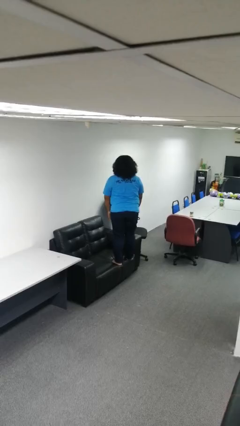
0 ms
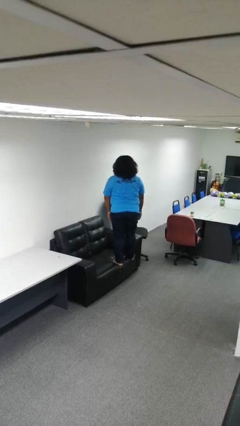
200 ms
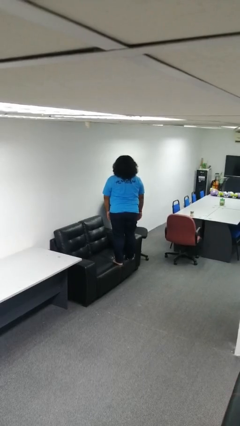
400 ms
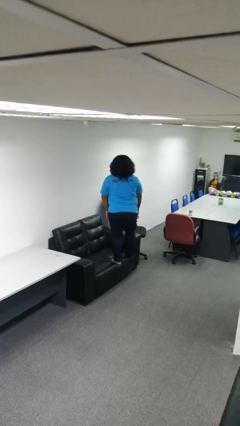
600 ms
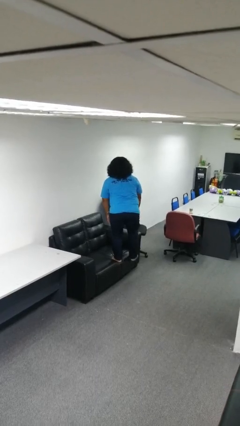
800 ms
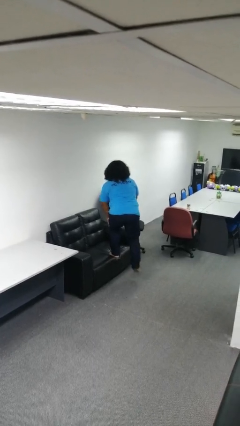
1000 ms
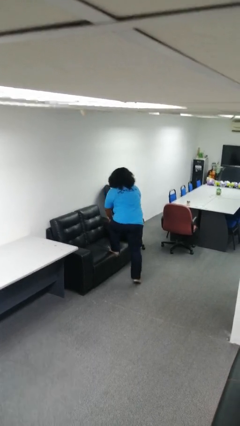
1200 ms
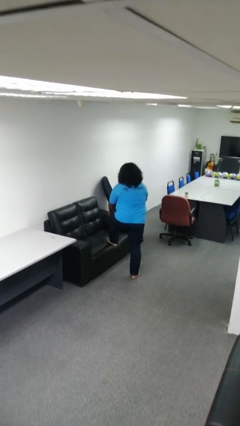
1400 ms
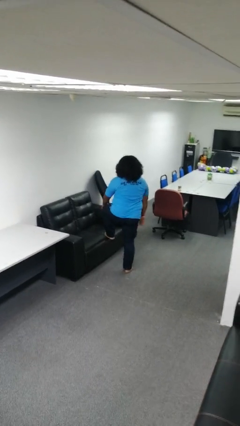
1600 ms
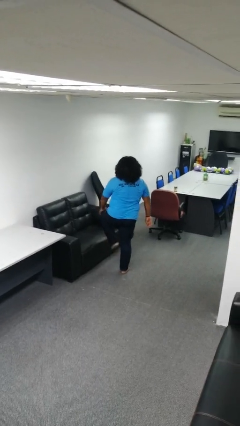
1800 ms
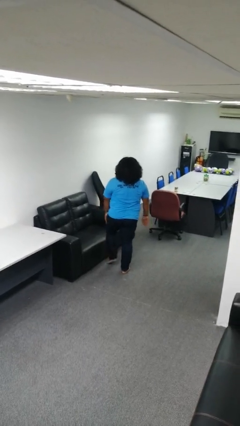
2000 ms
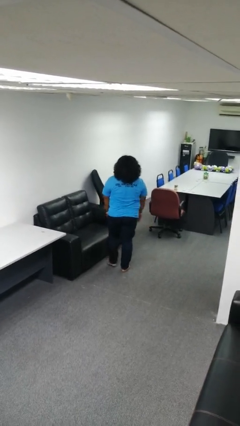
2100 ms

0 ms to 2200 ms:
person climbs off couch

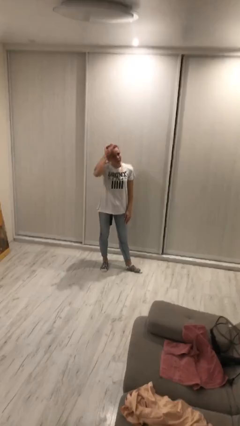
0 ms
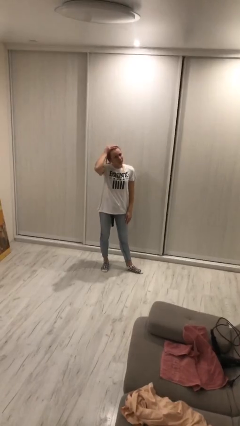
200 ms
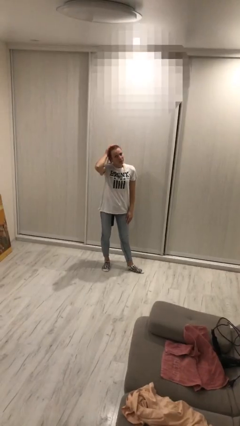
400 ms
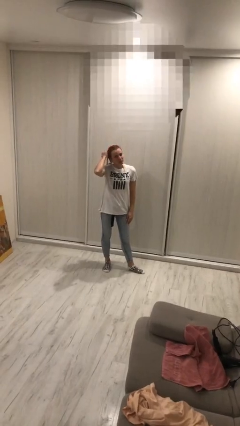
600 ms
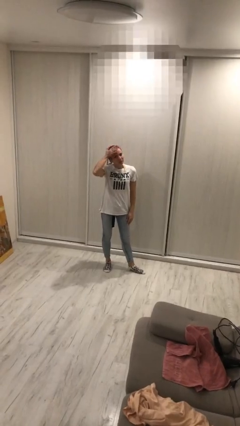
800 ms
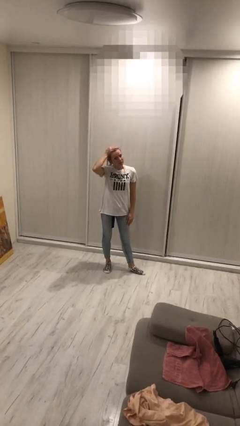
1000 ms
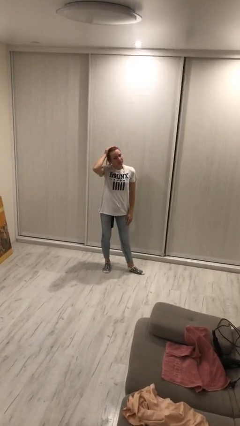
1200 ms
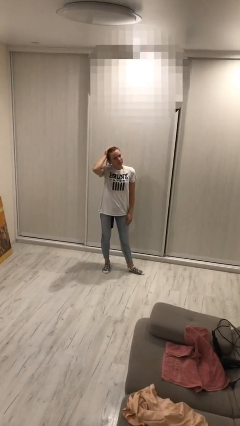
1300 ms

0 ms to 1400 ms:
person pats head

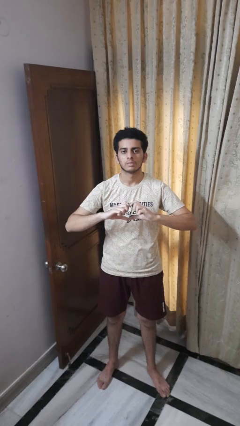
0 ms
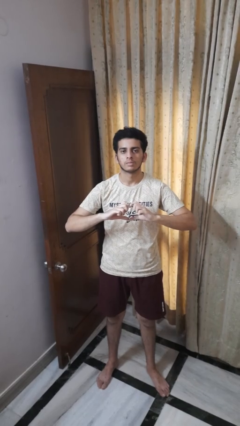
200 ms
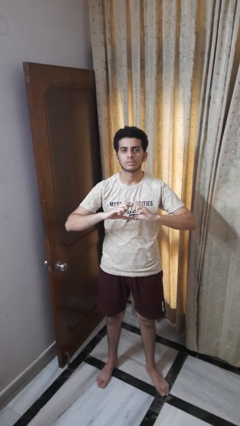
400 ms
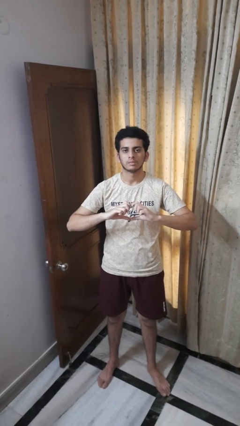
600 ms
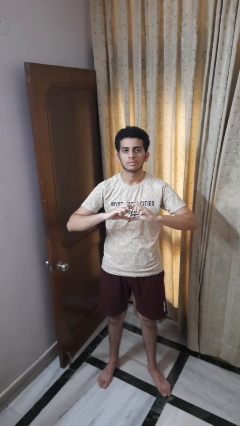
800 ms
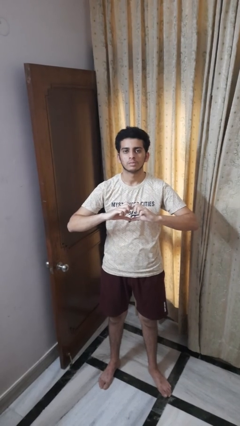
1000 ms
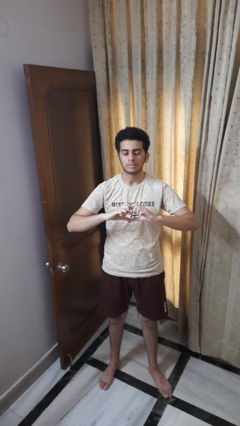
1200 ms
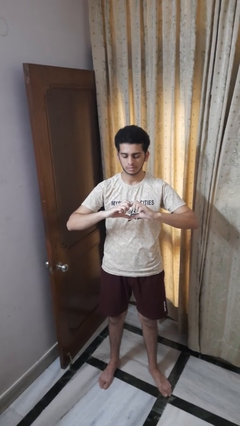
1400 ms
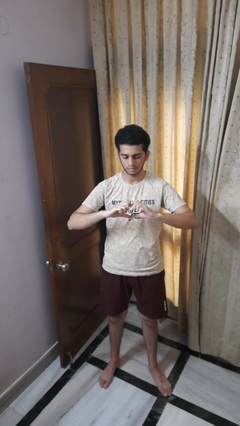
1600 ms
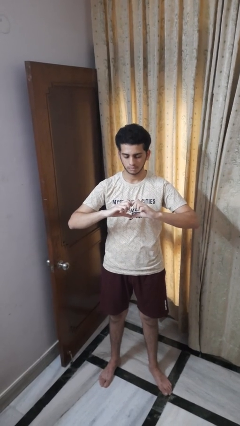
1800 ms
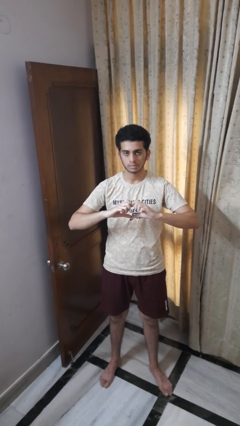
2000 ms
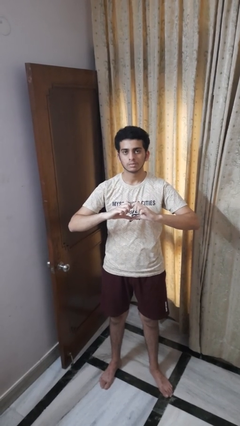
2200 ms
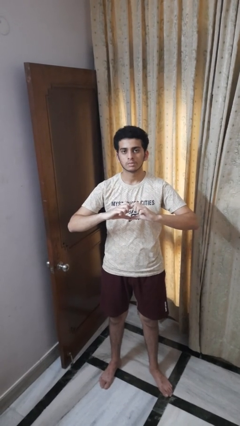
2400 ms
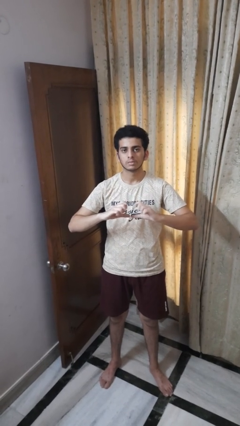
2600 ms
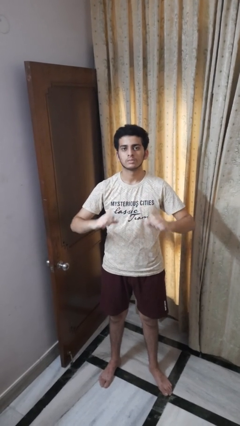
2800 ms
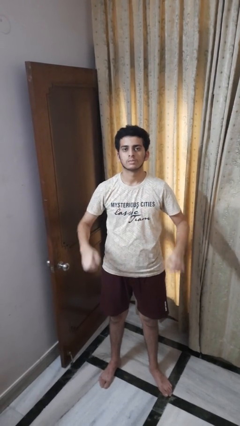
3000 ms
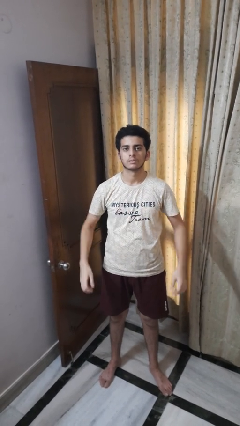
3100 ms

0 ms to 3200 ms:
person gestures heart

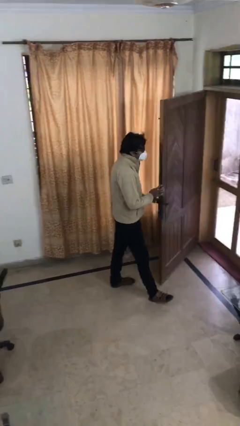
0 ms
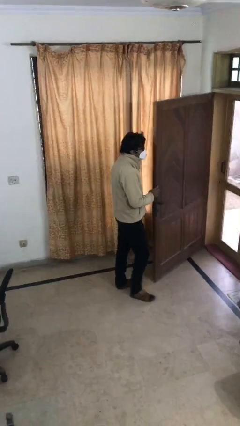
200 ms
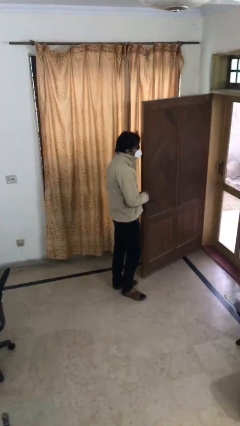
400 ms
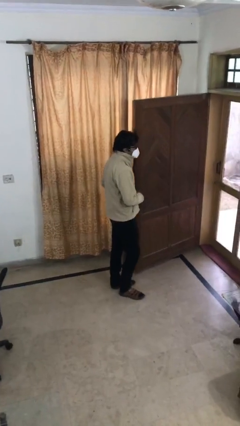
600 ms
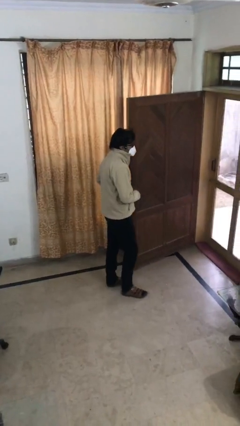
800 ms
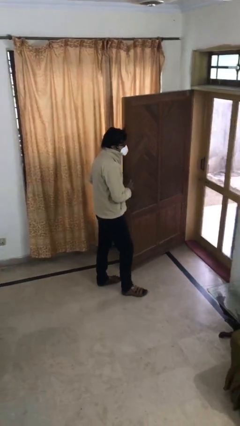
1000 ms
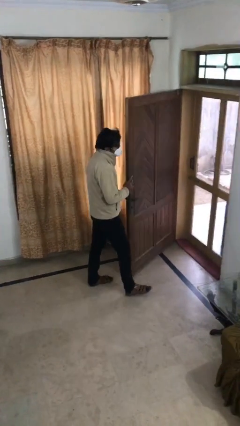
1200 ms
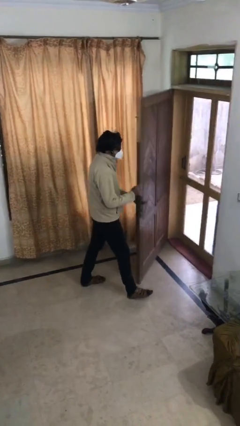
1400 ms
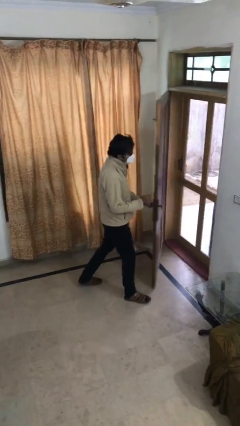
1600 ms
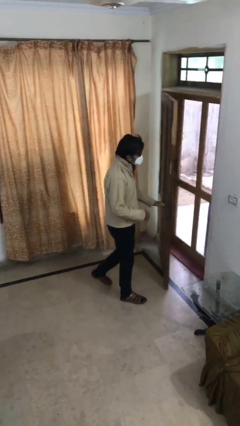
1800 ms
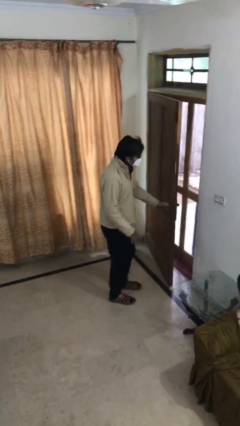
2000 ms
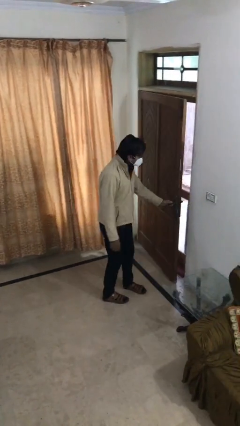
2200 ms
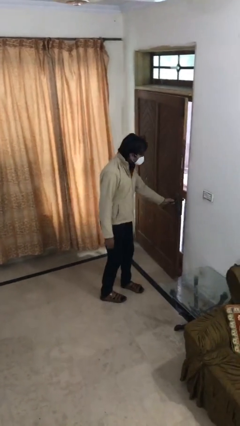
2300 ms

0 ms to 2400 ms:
person closes facility door

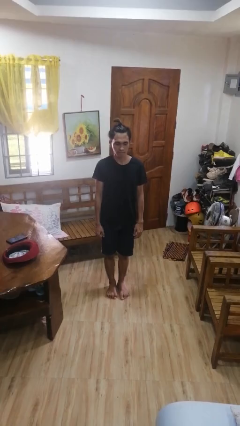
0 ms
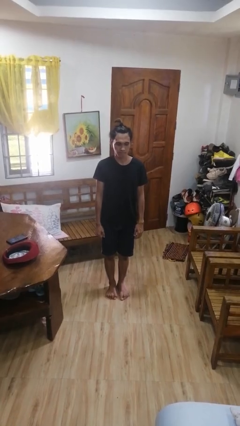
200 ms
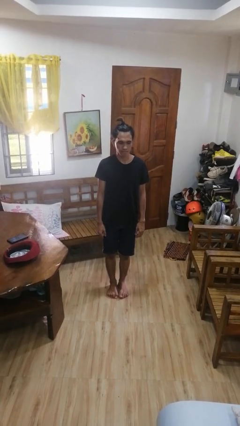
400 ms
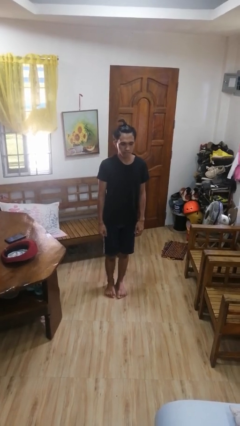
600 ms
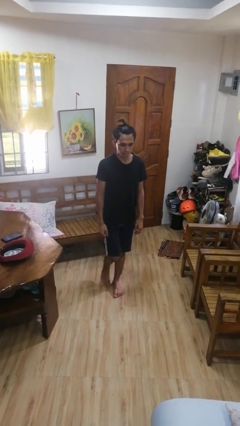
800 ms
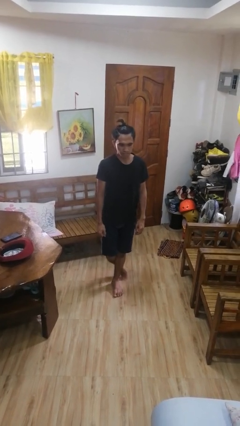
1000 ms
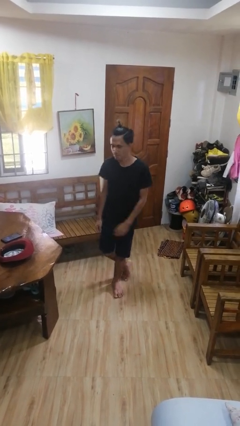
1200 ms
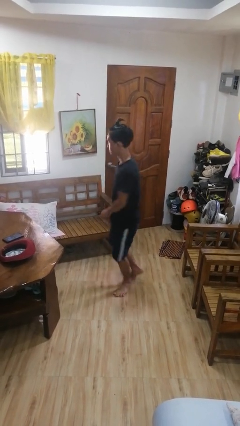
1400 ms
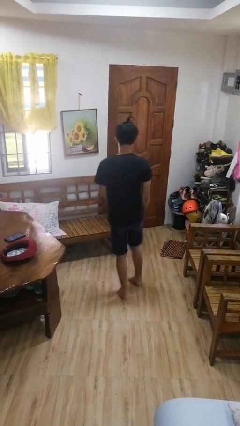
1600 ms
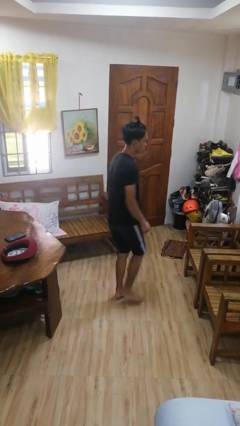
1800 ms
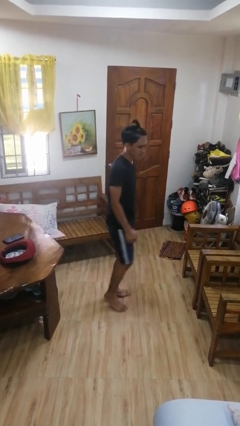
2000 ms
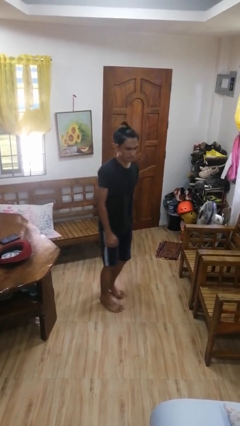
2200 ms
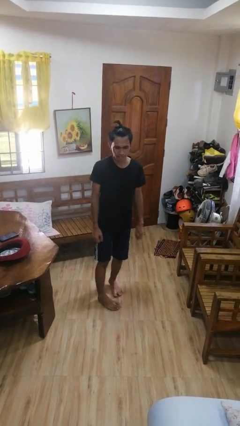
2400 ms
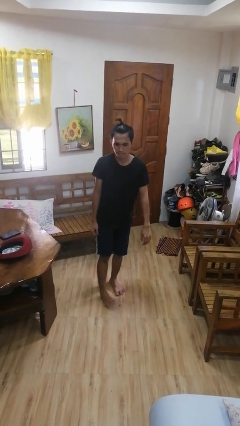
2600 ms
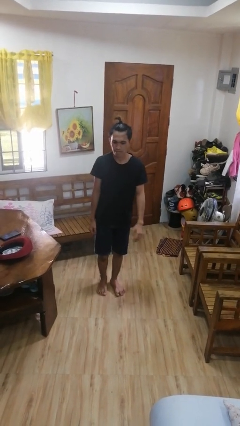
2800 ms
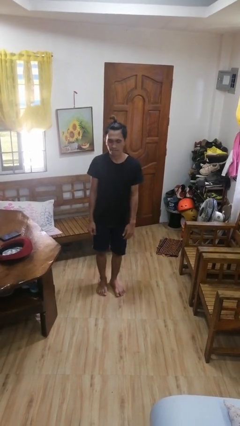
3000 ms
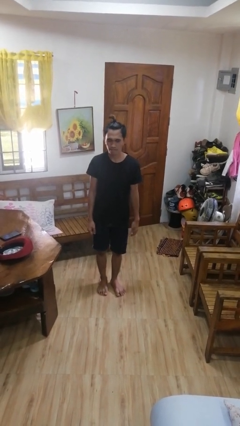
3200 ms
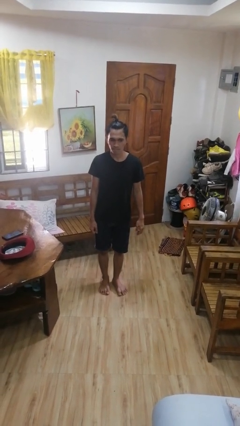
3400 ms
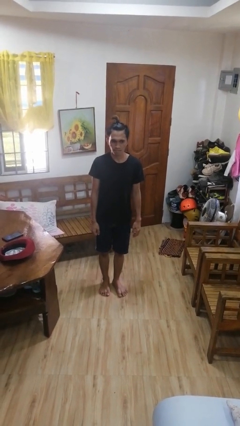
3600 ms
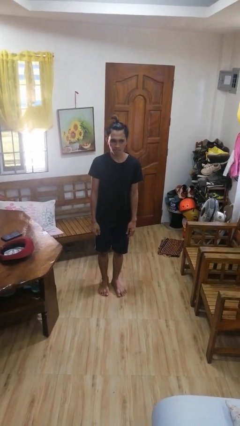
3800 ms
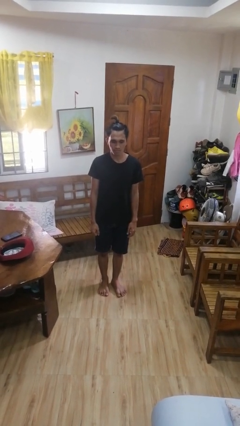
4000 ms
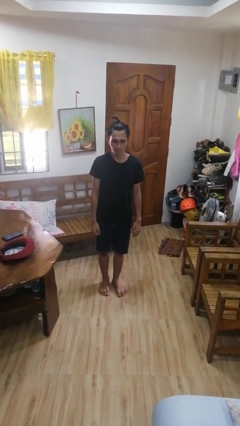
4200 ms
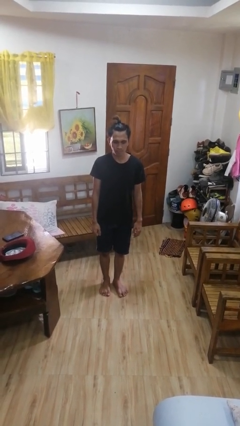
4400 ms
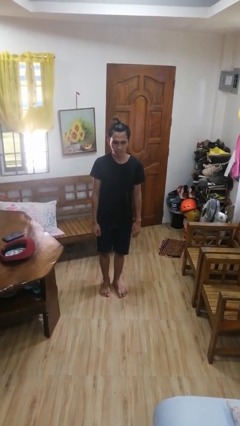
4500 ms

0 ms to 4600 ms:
person twirls

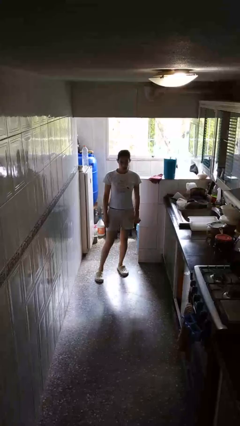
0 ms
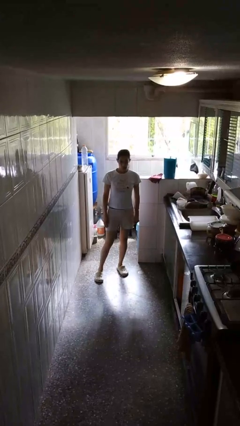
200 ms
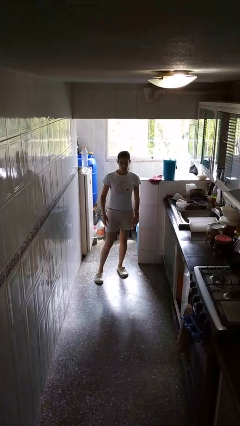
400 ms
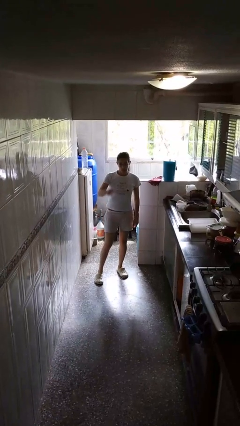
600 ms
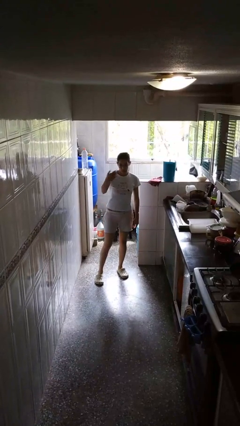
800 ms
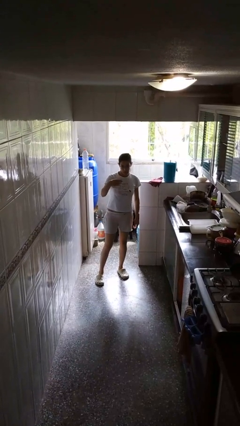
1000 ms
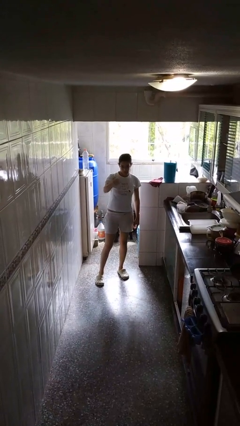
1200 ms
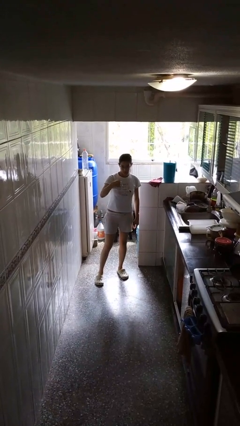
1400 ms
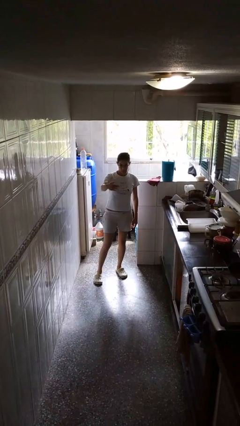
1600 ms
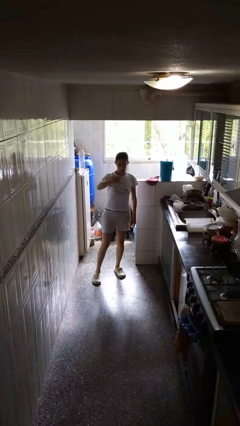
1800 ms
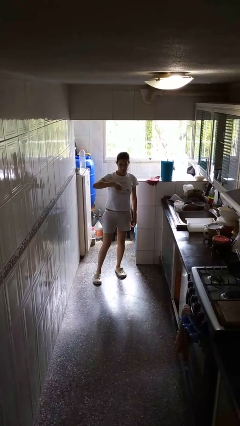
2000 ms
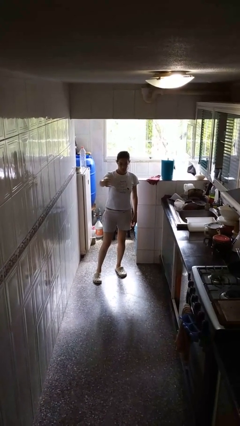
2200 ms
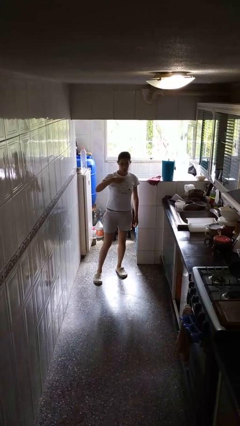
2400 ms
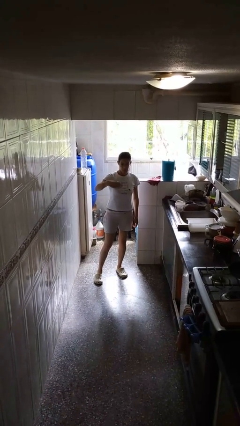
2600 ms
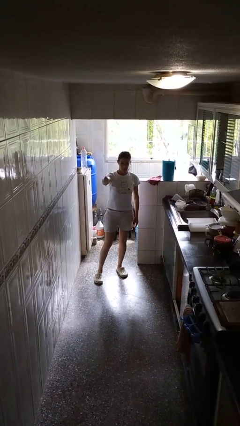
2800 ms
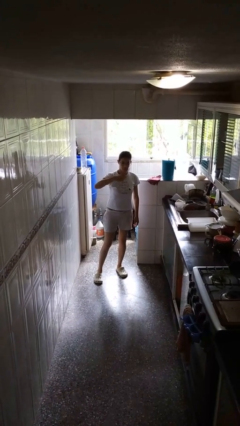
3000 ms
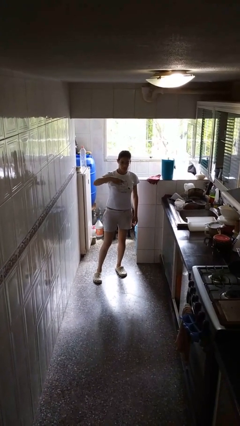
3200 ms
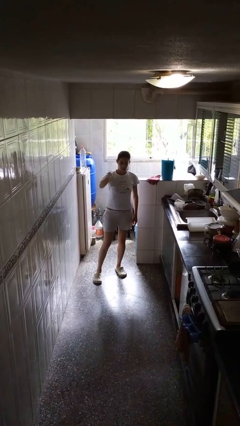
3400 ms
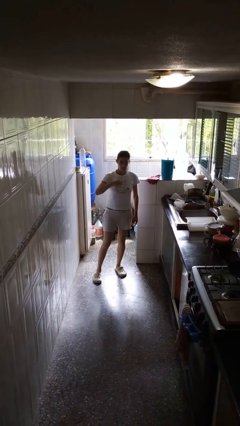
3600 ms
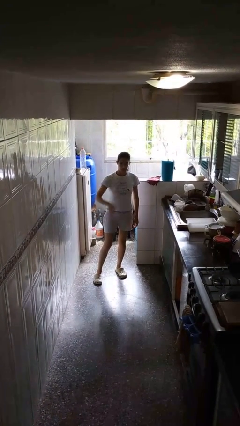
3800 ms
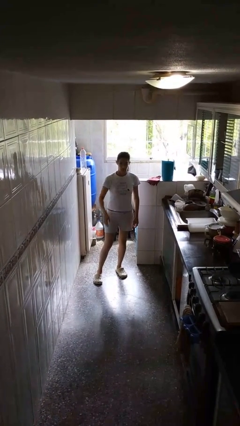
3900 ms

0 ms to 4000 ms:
person gestures come here
